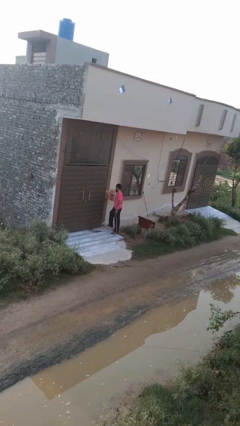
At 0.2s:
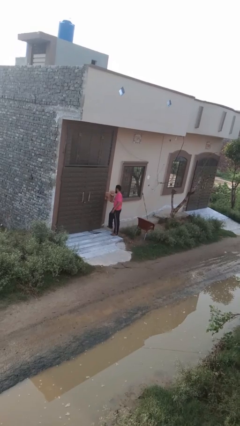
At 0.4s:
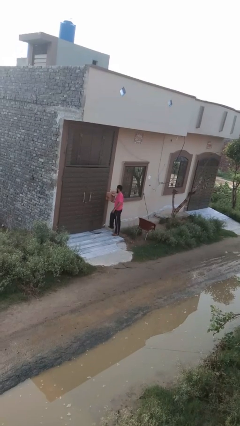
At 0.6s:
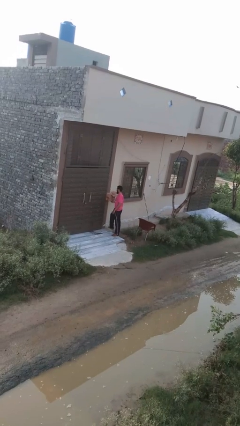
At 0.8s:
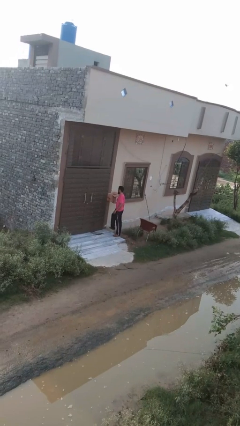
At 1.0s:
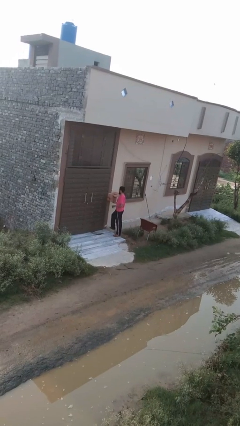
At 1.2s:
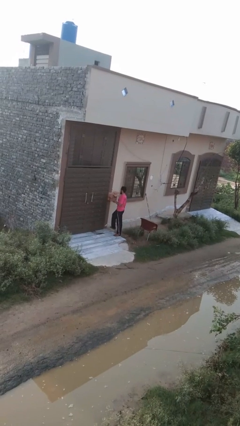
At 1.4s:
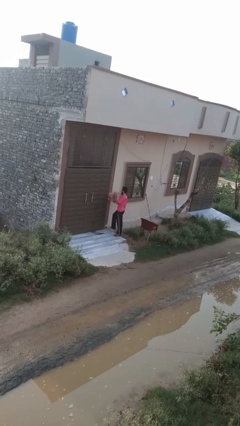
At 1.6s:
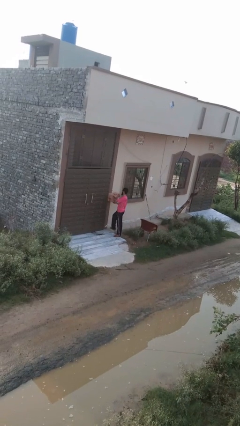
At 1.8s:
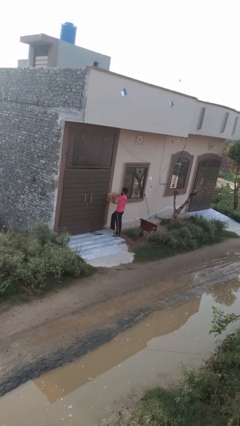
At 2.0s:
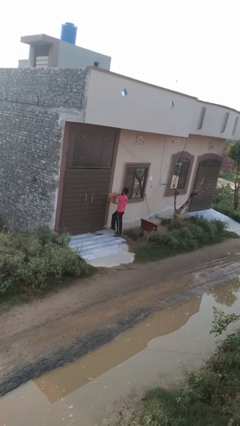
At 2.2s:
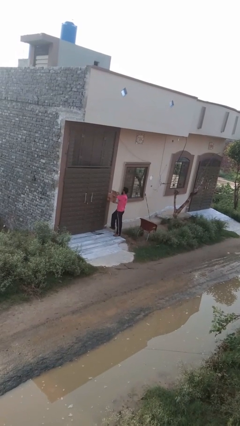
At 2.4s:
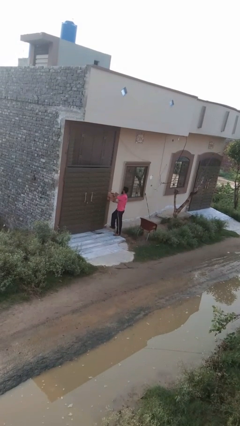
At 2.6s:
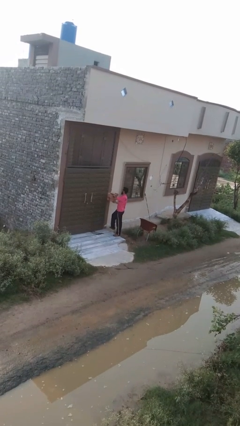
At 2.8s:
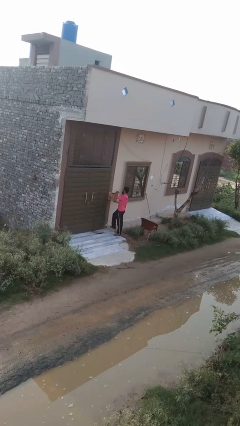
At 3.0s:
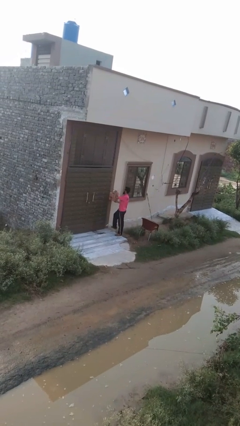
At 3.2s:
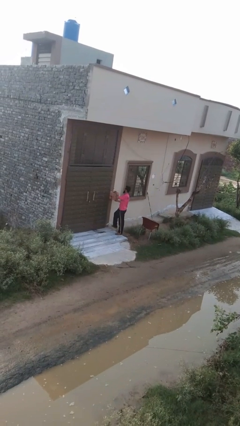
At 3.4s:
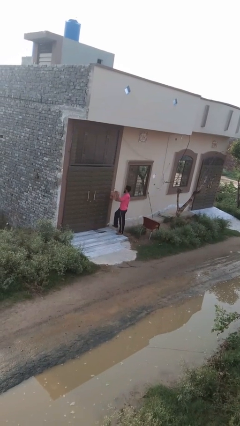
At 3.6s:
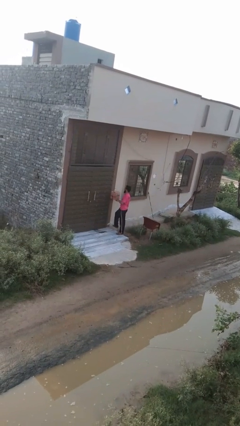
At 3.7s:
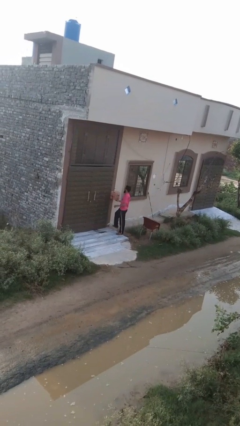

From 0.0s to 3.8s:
person closes mailbox

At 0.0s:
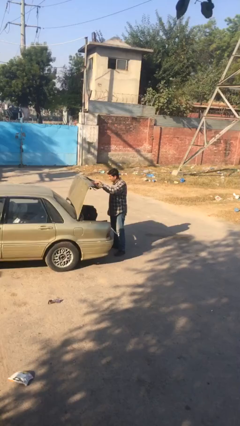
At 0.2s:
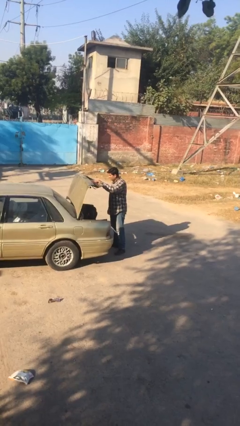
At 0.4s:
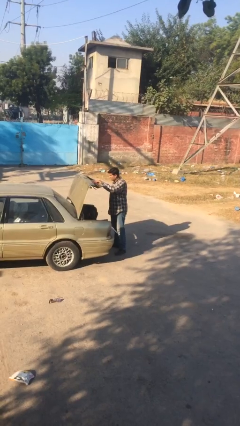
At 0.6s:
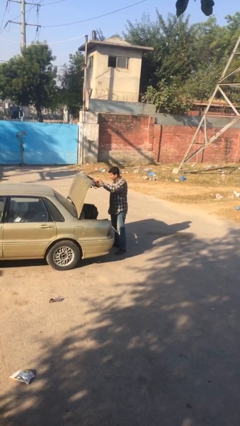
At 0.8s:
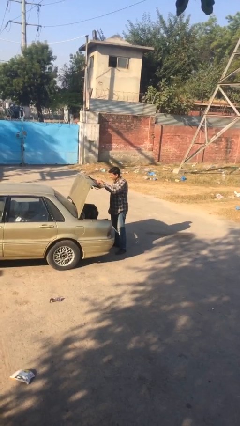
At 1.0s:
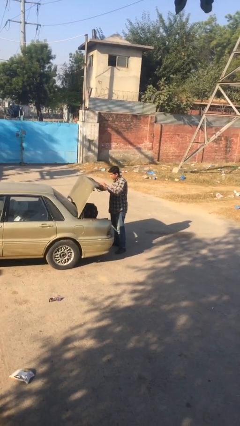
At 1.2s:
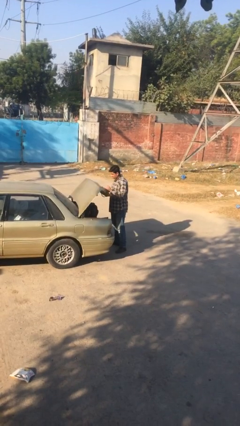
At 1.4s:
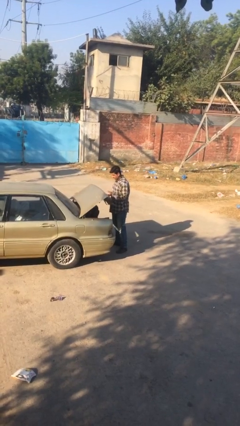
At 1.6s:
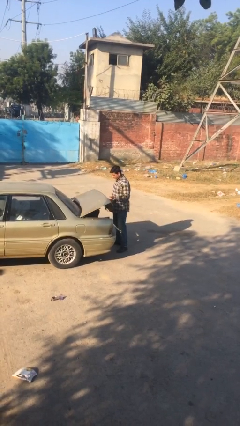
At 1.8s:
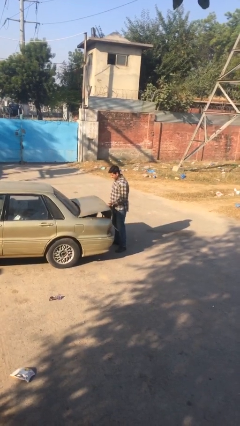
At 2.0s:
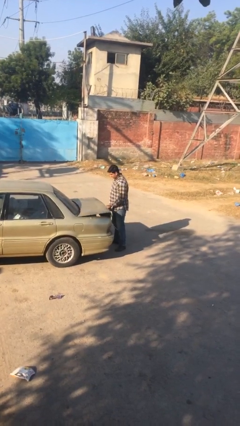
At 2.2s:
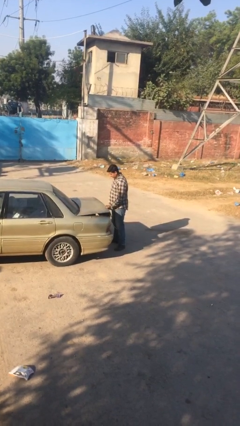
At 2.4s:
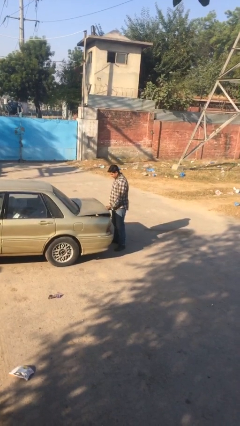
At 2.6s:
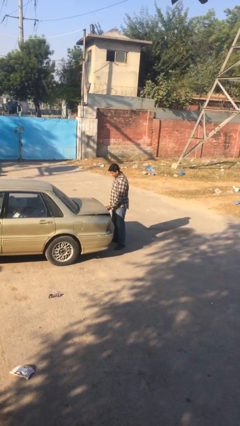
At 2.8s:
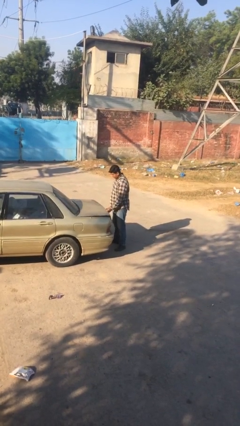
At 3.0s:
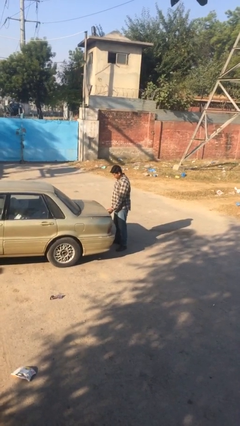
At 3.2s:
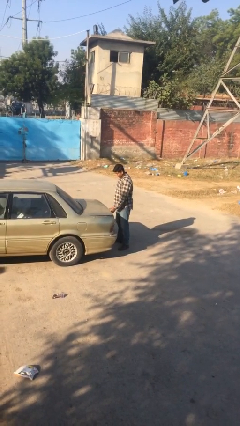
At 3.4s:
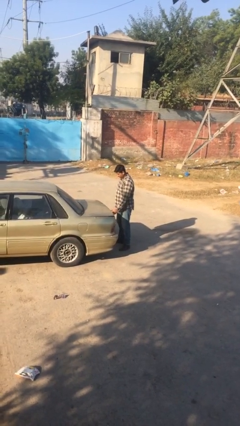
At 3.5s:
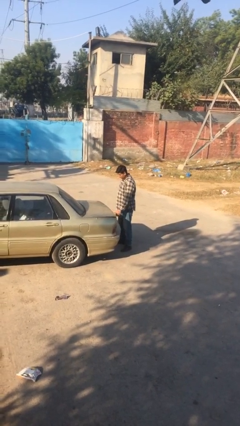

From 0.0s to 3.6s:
person closes car trunk

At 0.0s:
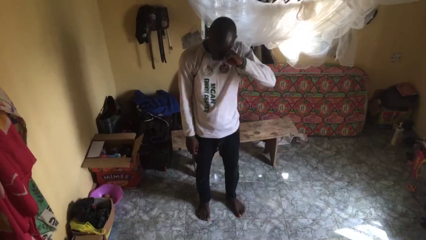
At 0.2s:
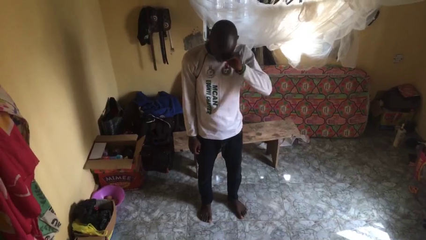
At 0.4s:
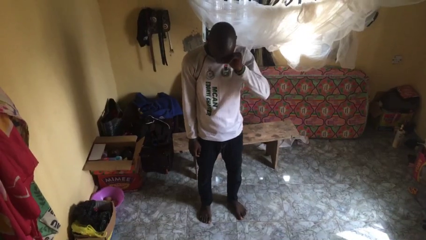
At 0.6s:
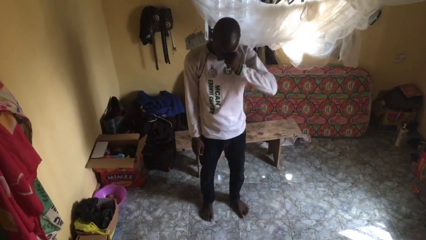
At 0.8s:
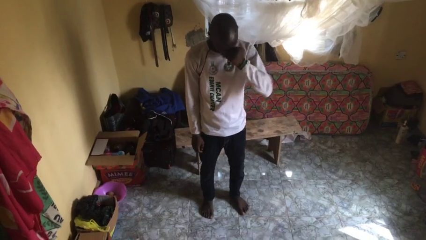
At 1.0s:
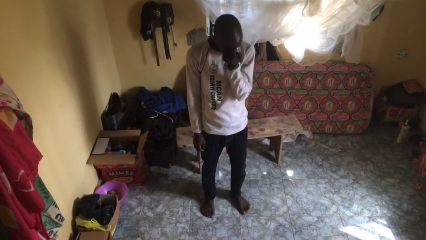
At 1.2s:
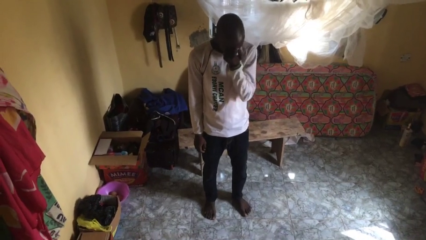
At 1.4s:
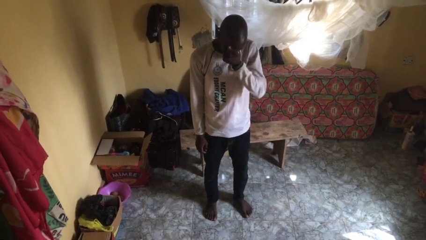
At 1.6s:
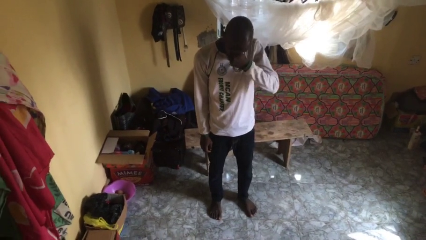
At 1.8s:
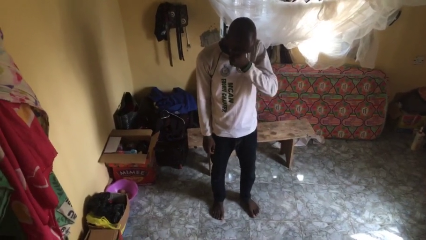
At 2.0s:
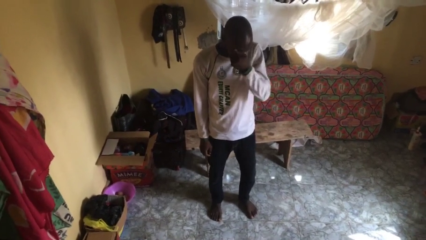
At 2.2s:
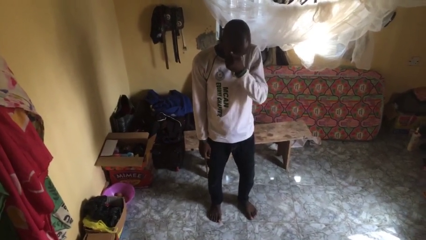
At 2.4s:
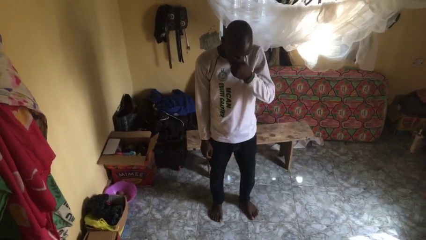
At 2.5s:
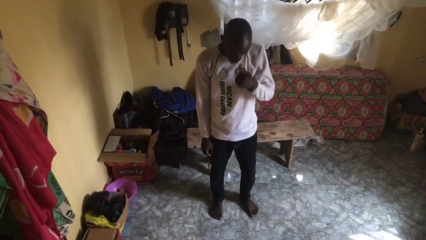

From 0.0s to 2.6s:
person rubs eyes

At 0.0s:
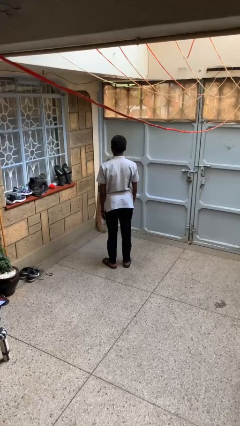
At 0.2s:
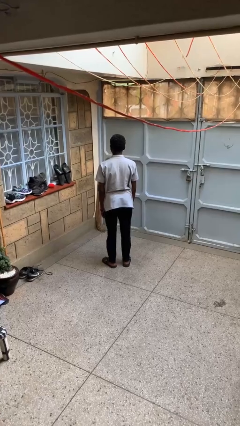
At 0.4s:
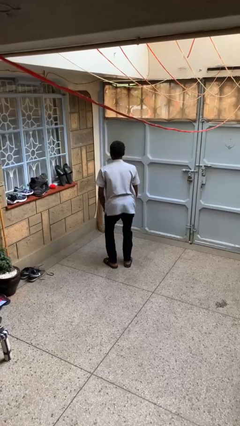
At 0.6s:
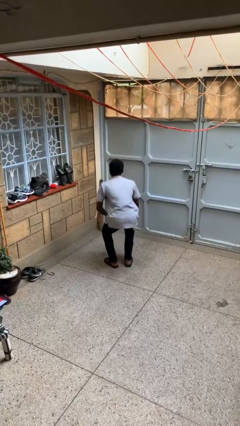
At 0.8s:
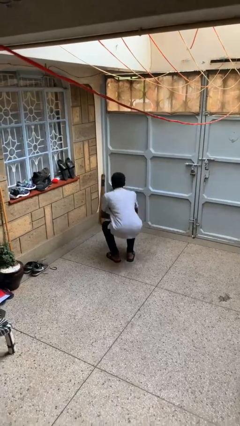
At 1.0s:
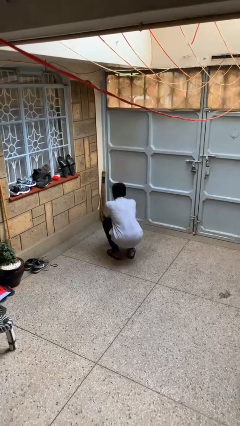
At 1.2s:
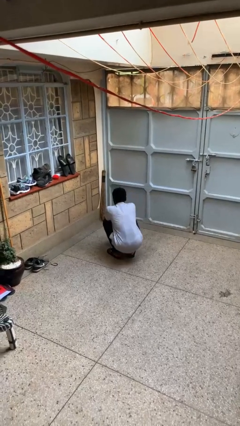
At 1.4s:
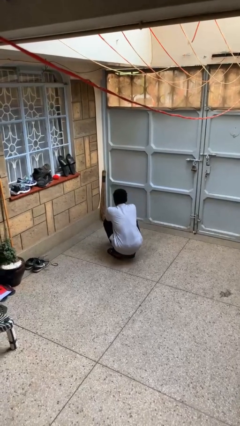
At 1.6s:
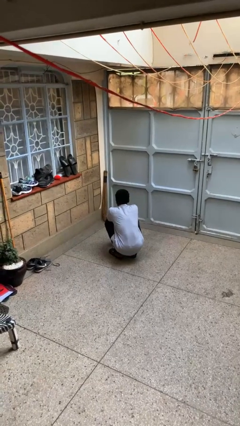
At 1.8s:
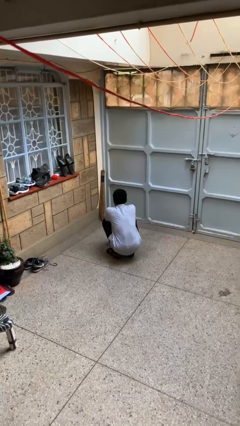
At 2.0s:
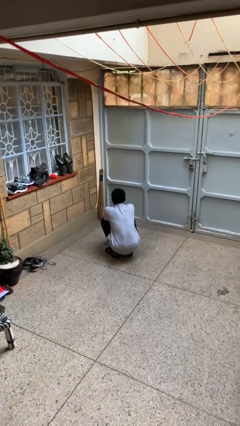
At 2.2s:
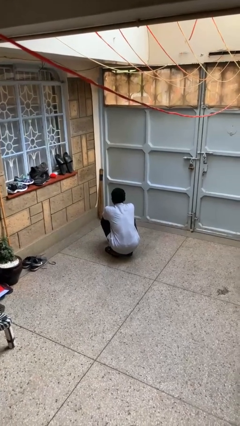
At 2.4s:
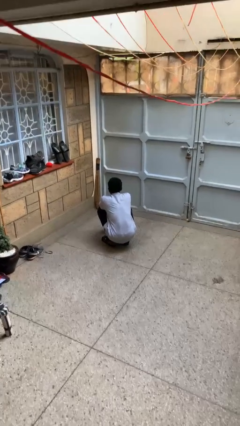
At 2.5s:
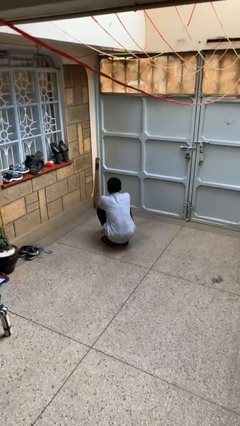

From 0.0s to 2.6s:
person squats

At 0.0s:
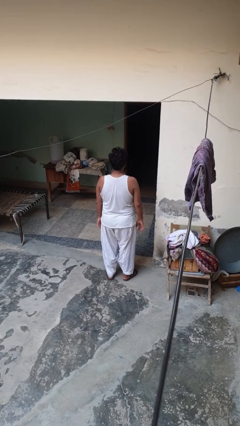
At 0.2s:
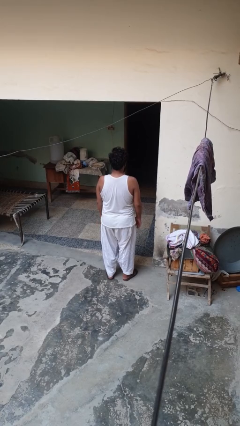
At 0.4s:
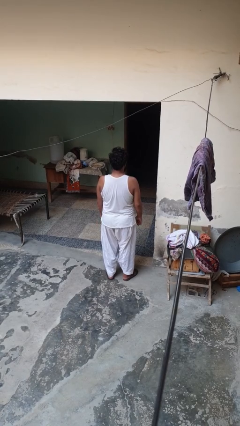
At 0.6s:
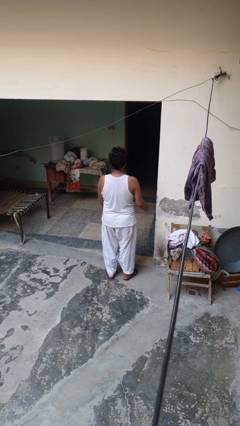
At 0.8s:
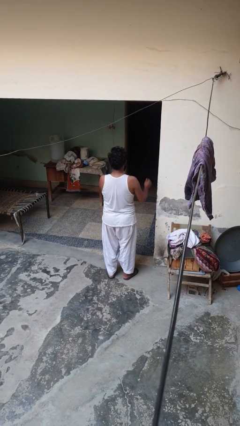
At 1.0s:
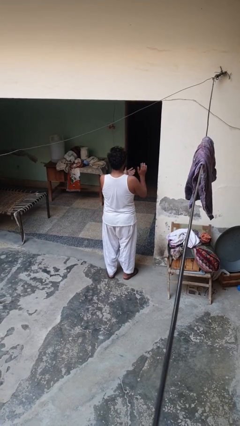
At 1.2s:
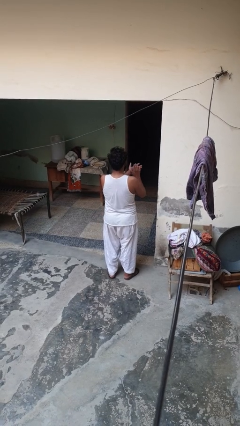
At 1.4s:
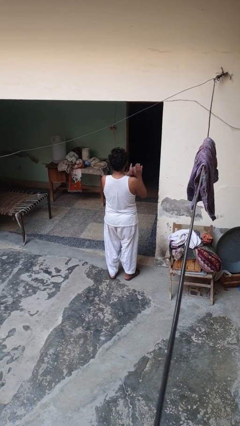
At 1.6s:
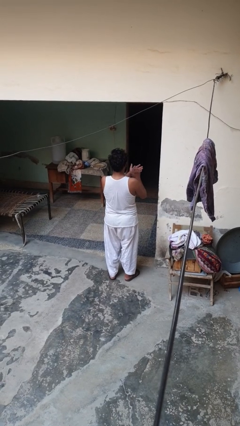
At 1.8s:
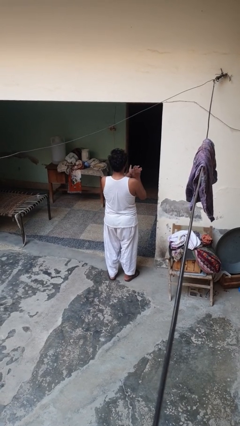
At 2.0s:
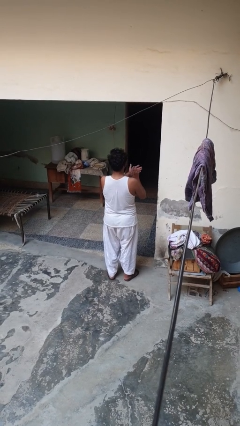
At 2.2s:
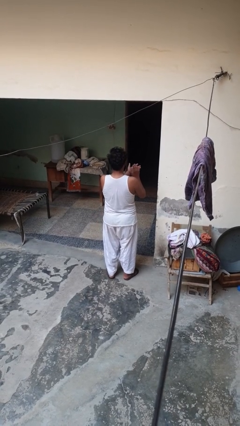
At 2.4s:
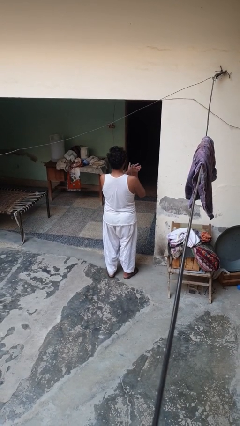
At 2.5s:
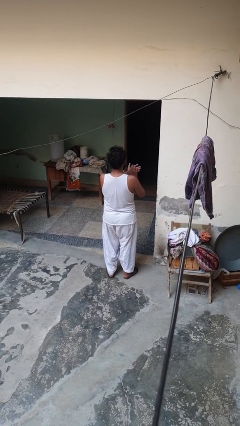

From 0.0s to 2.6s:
person claps hands

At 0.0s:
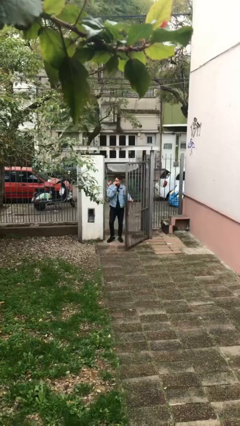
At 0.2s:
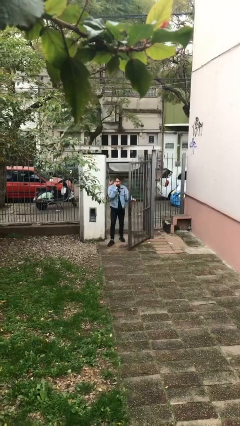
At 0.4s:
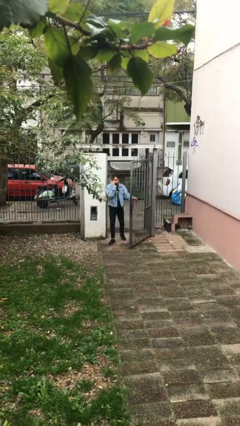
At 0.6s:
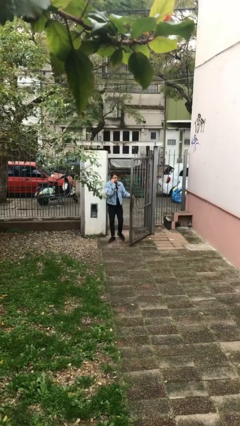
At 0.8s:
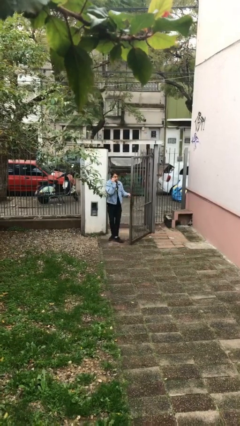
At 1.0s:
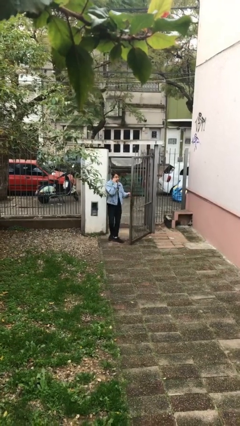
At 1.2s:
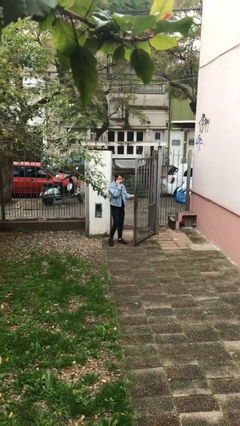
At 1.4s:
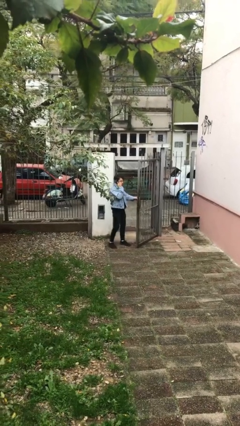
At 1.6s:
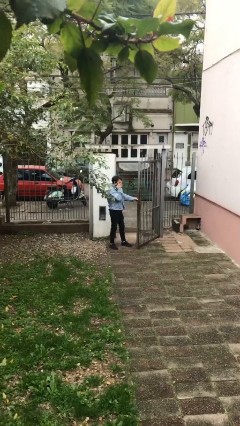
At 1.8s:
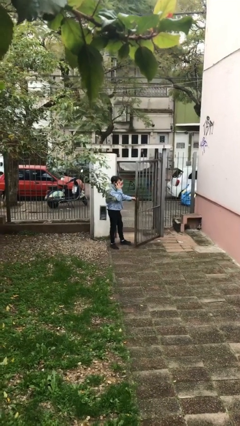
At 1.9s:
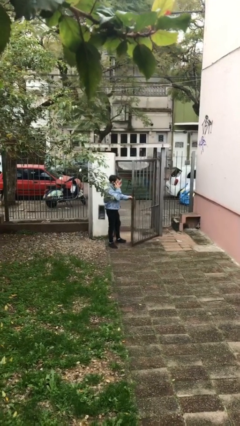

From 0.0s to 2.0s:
person enters scene through structure
